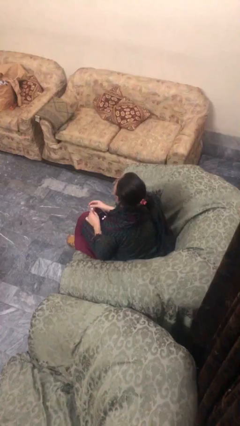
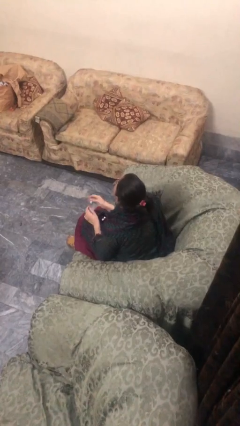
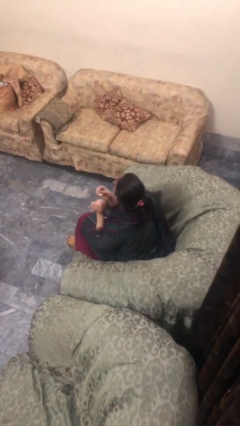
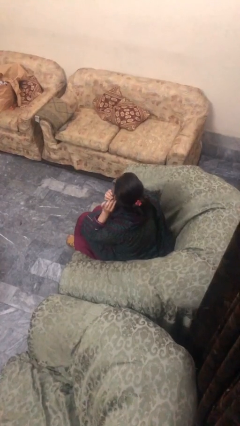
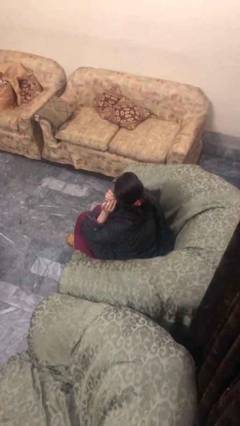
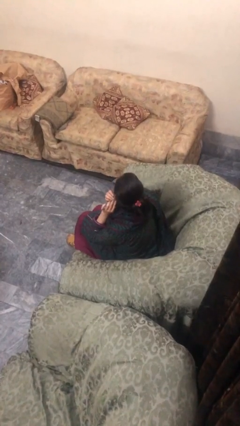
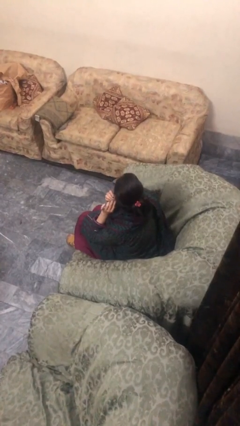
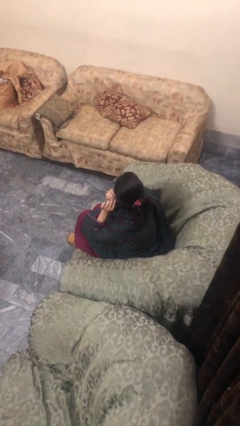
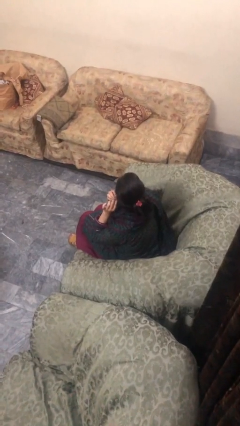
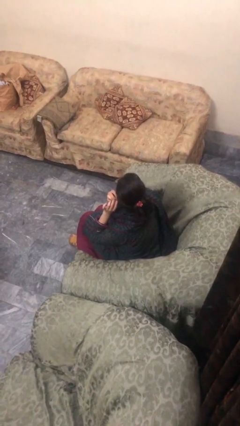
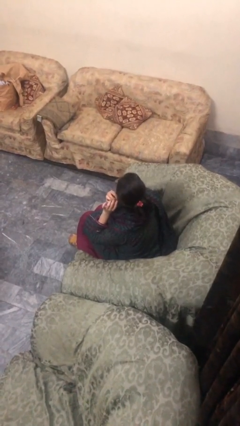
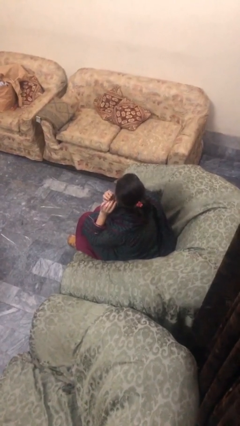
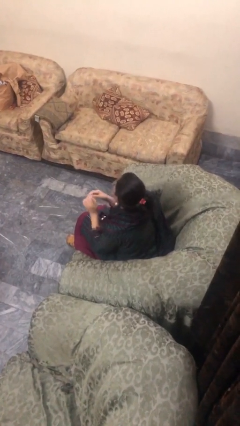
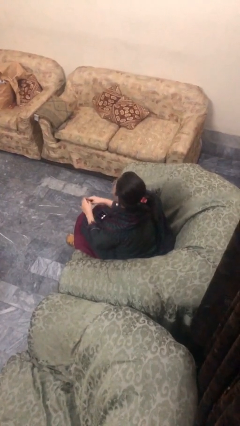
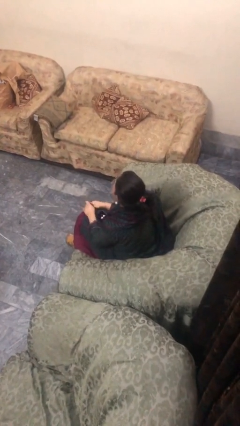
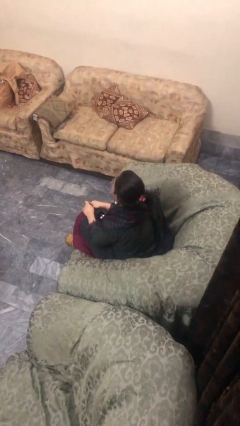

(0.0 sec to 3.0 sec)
person puts on earrings

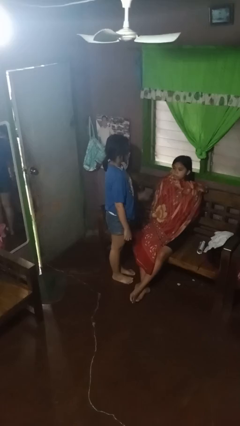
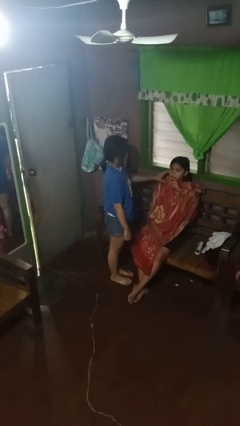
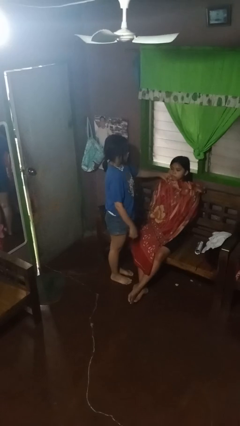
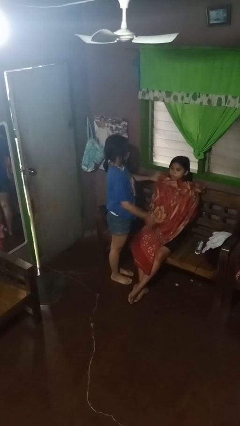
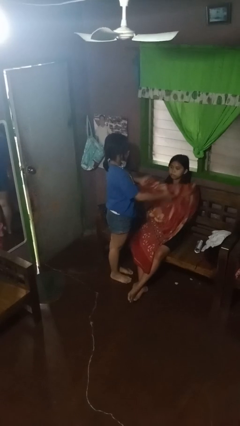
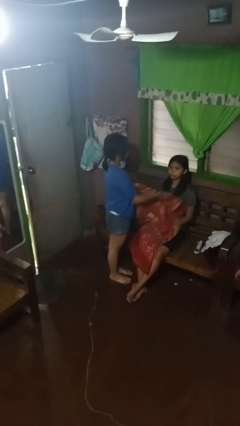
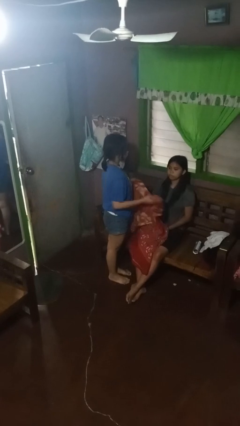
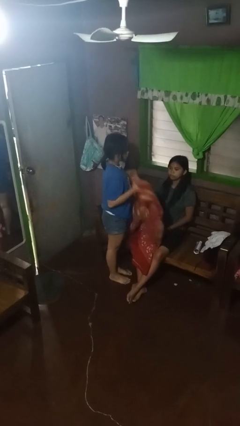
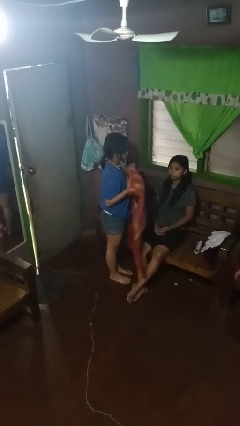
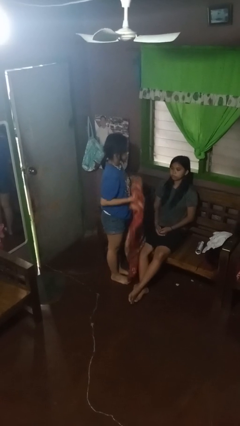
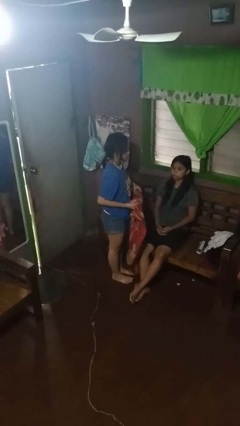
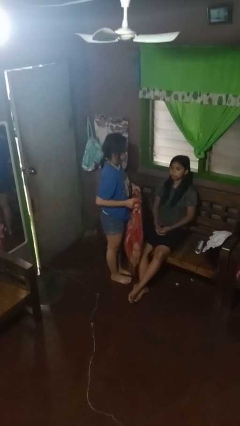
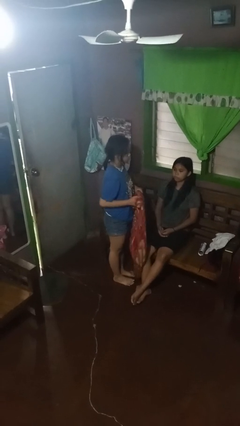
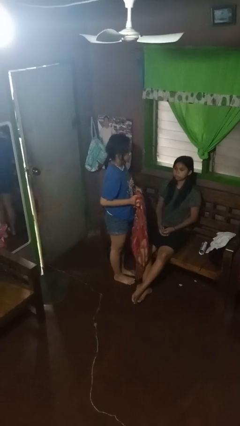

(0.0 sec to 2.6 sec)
person uncovers friend with blanket

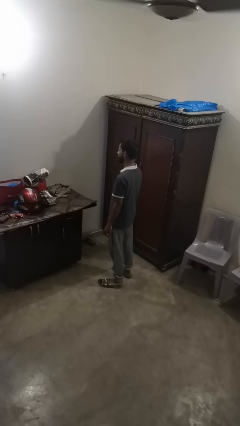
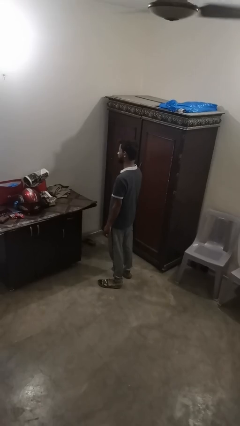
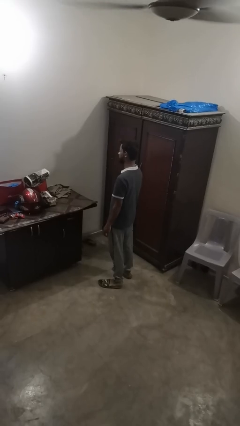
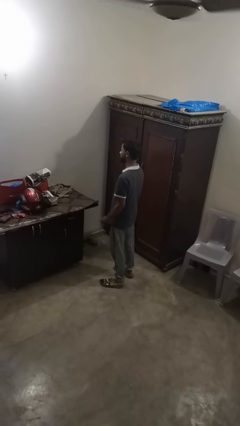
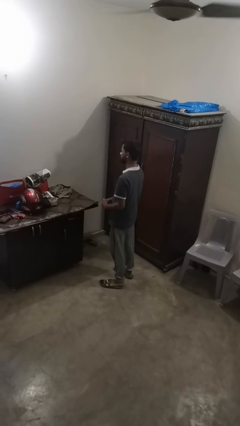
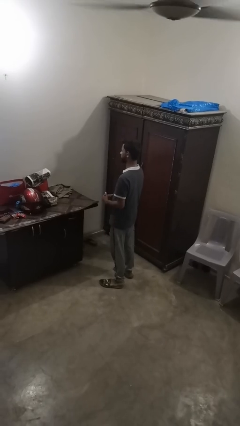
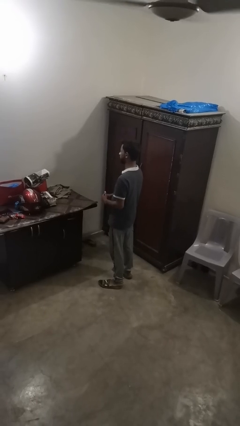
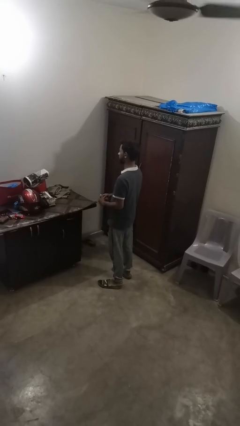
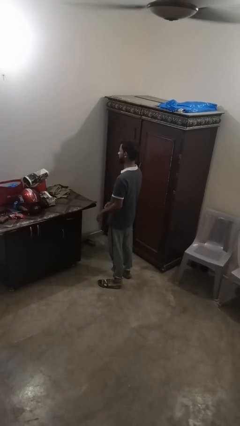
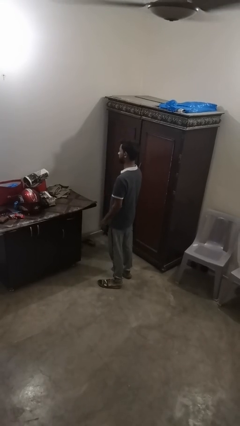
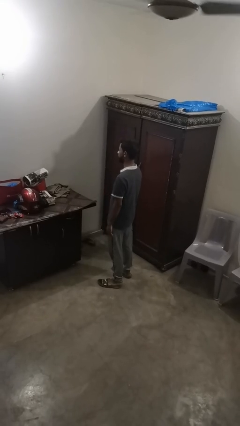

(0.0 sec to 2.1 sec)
person takes off ring

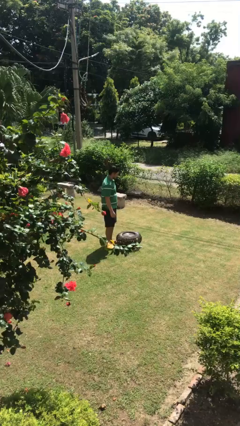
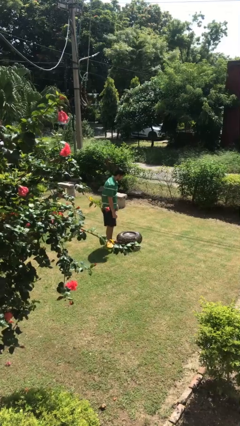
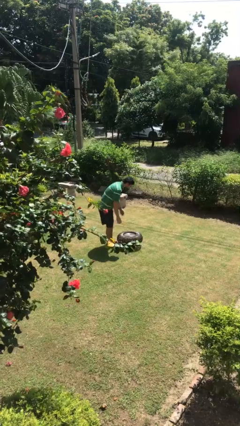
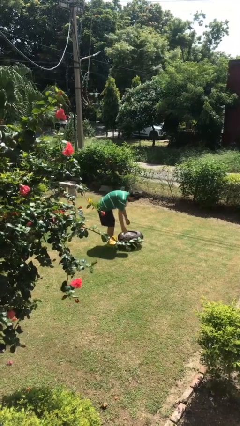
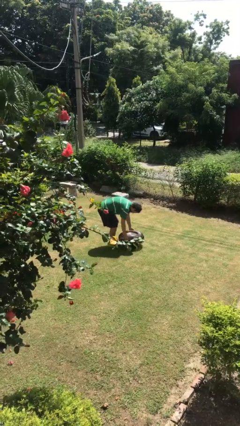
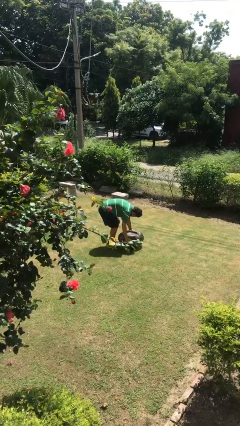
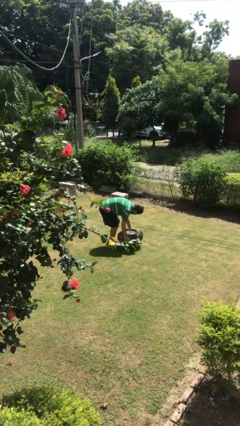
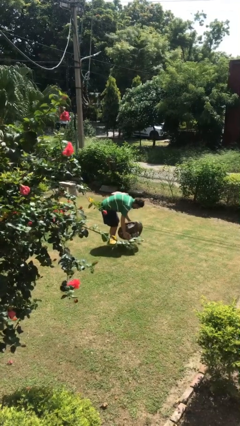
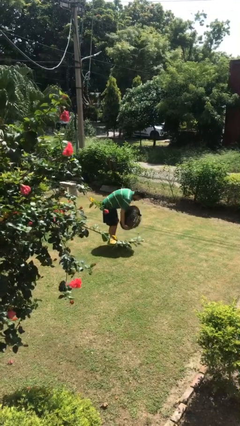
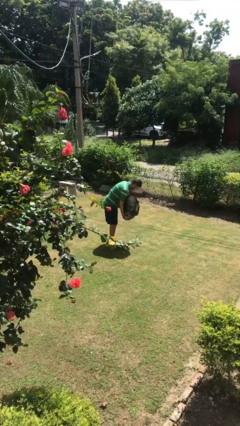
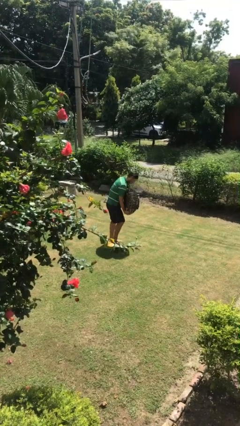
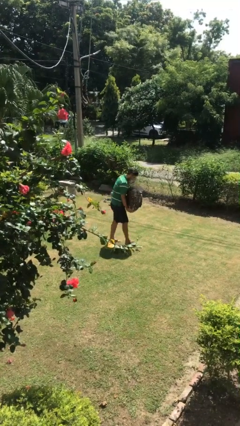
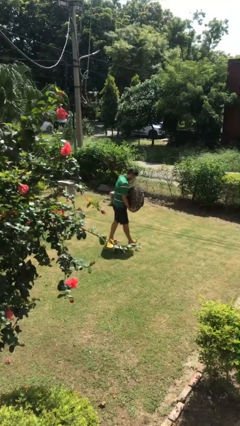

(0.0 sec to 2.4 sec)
person picks up object from floor

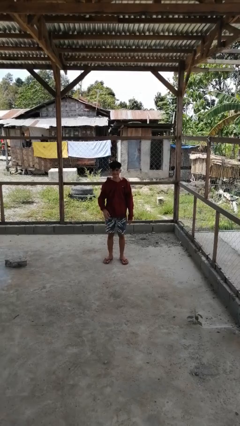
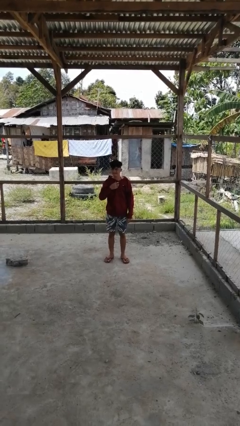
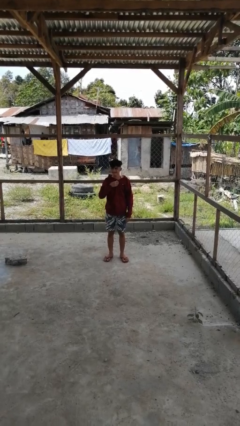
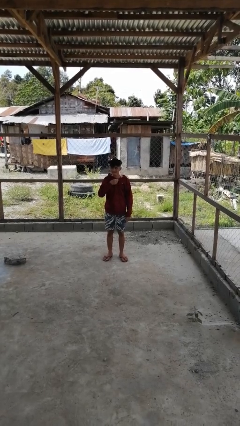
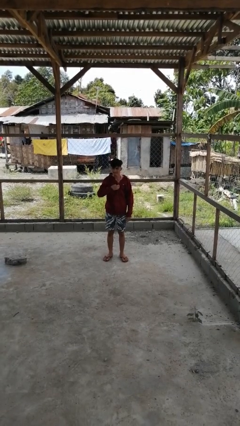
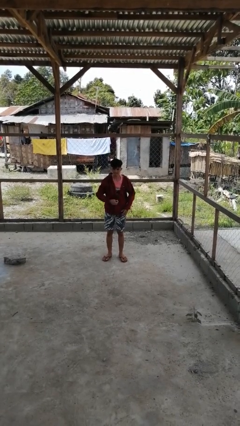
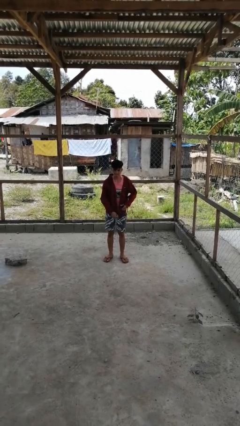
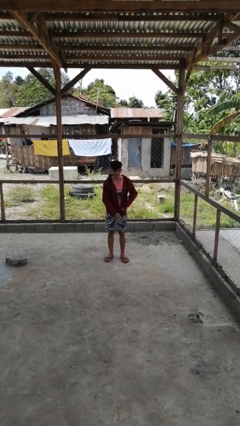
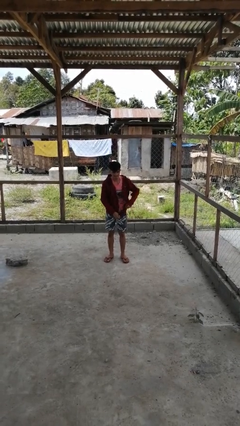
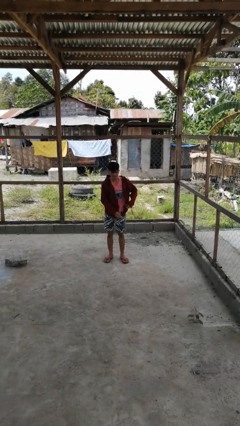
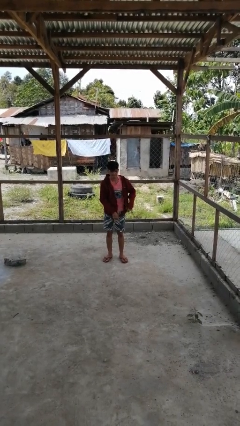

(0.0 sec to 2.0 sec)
person unzips jacket

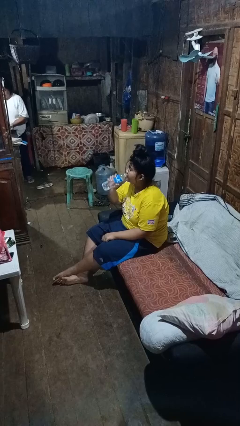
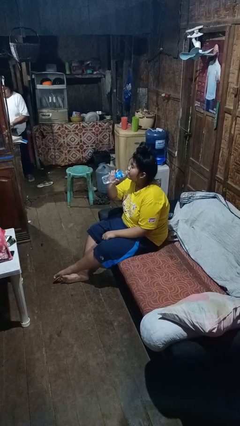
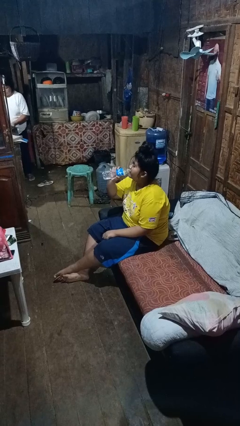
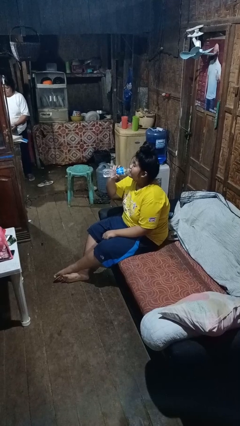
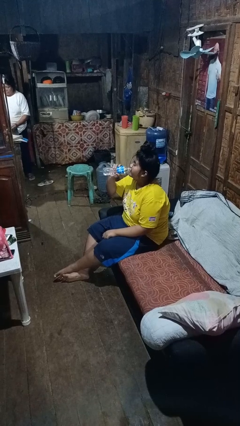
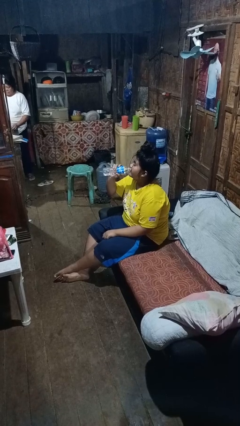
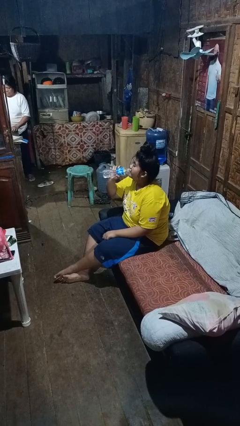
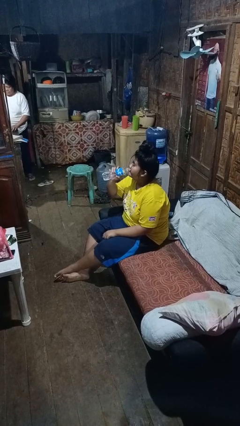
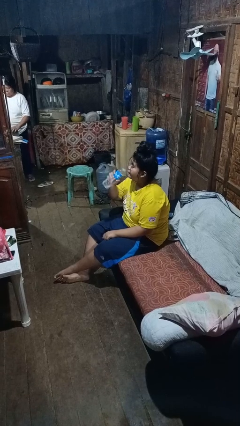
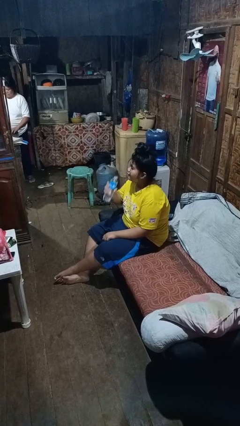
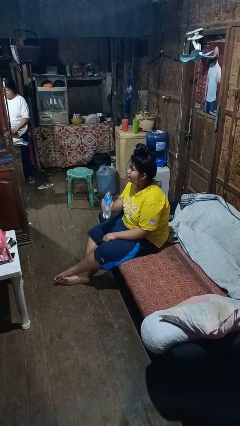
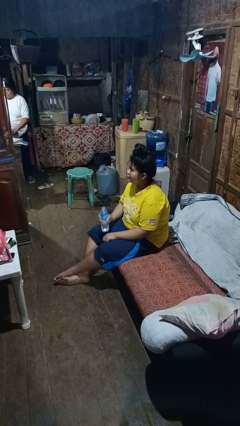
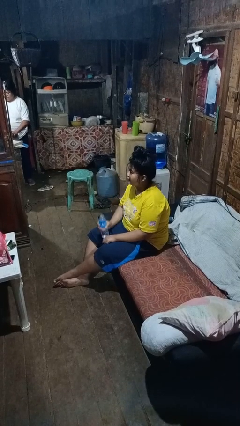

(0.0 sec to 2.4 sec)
person drinks from bottle

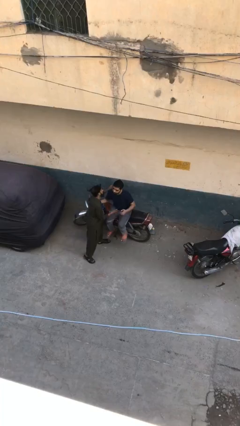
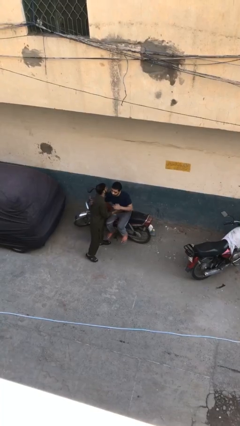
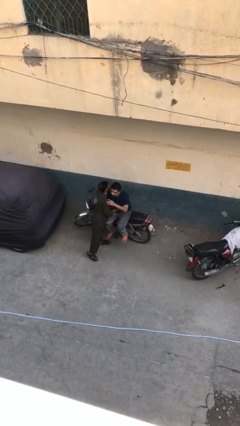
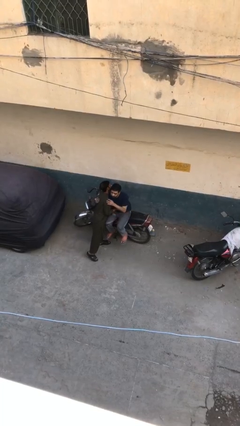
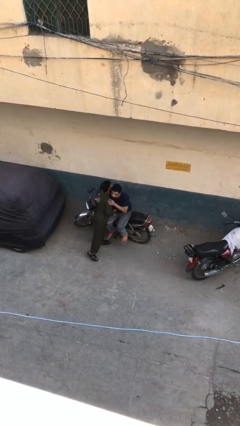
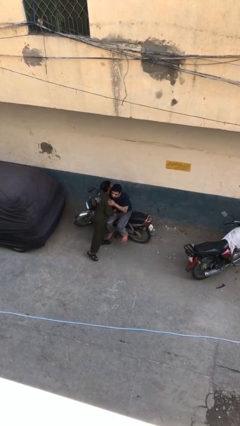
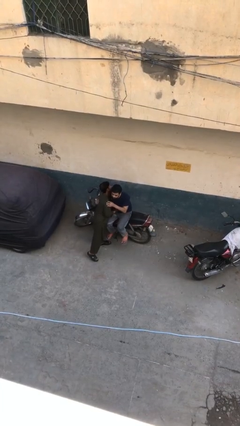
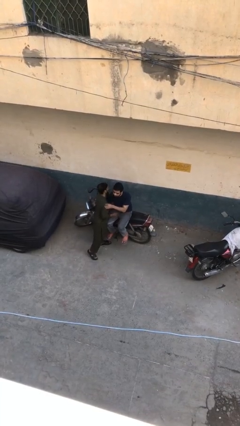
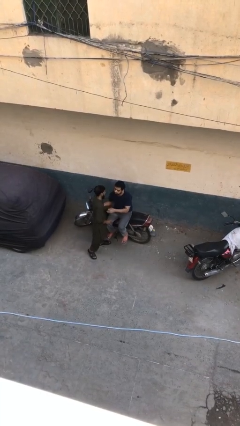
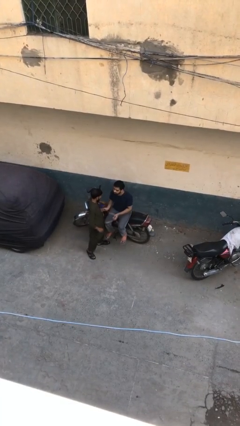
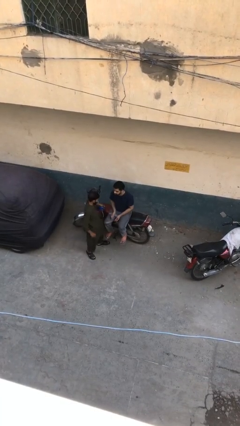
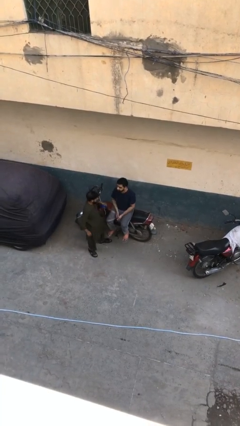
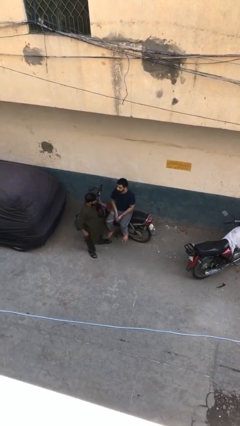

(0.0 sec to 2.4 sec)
person embraces person
